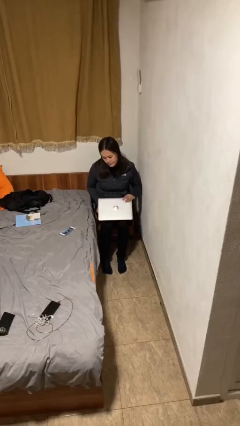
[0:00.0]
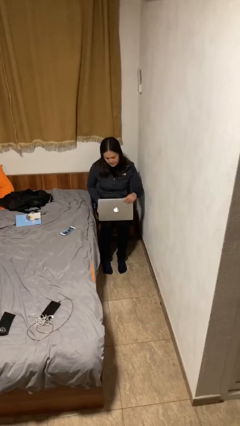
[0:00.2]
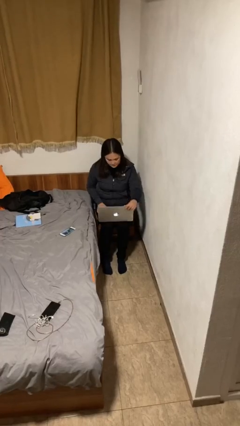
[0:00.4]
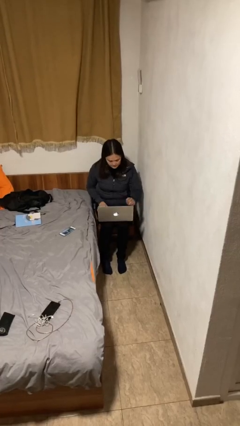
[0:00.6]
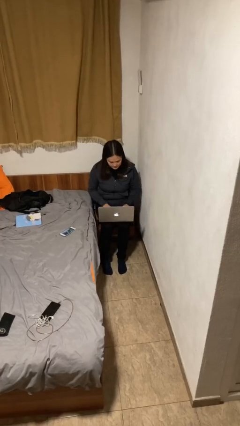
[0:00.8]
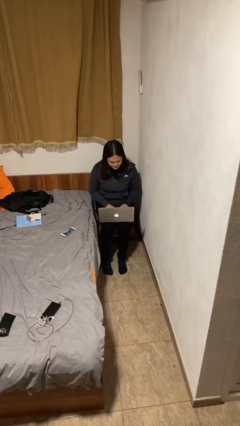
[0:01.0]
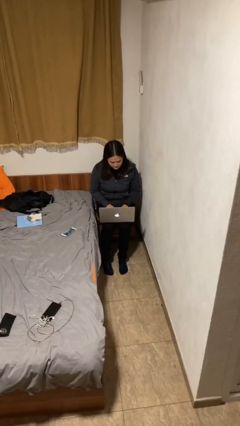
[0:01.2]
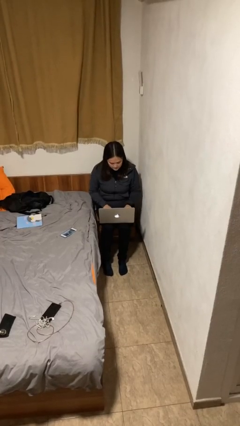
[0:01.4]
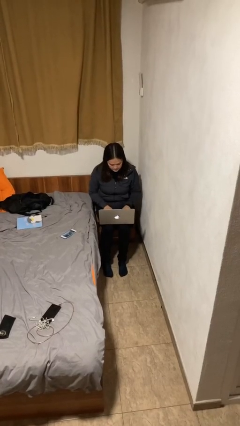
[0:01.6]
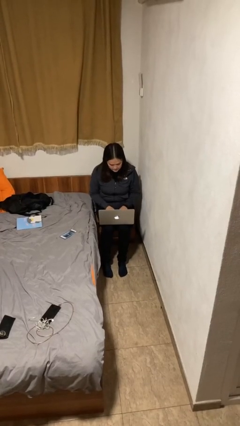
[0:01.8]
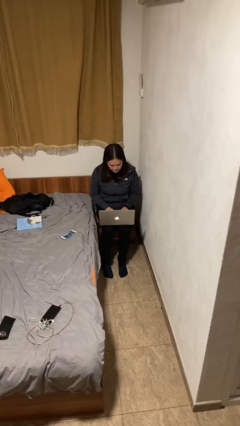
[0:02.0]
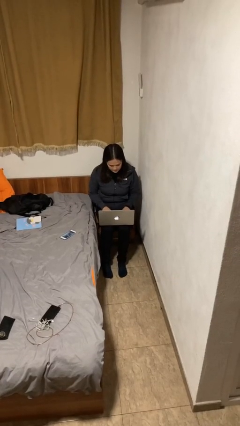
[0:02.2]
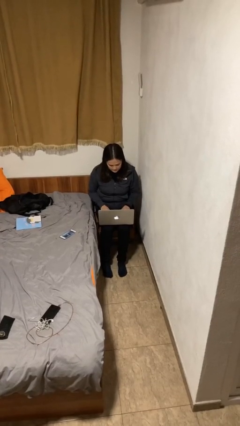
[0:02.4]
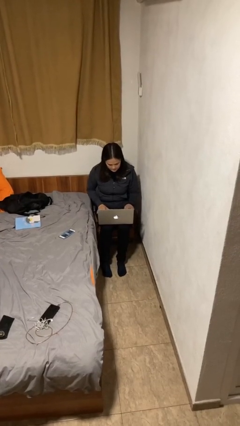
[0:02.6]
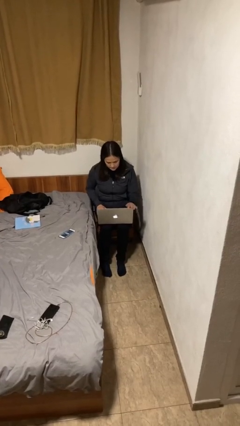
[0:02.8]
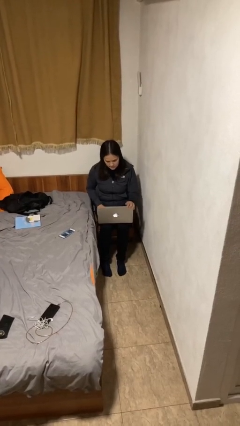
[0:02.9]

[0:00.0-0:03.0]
person interacts with laptop

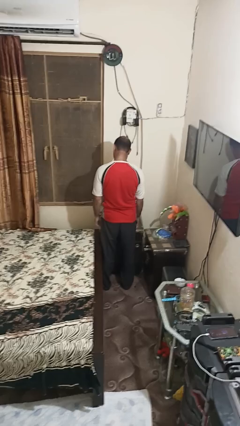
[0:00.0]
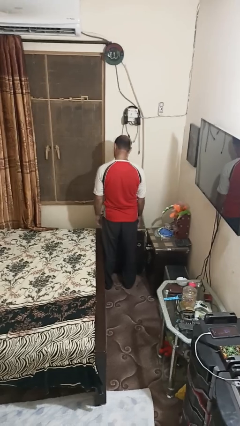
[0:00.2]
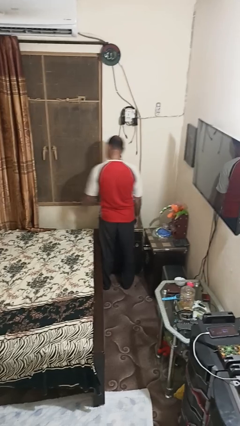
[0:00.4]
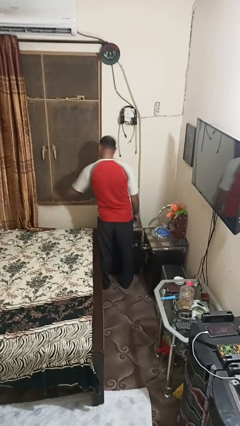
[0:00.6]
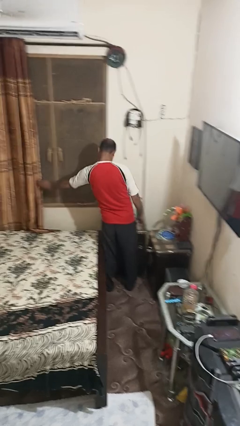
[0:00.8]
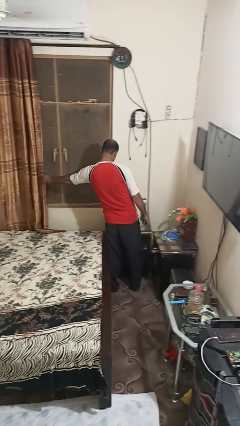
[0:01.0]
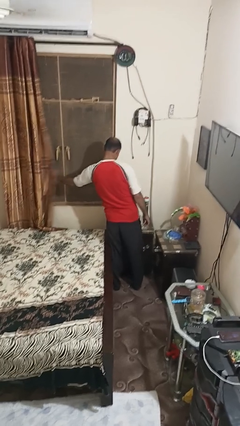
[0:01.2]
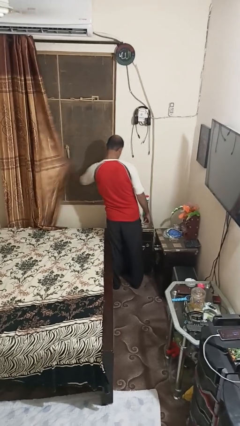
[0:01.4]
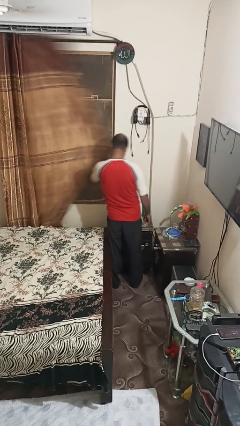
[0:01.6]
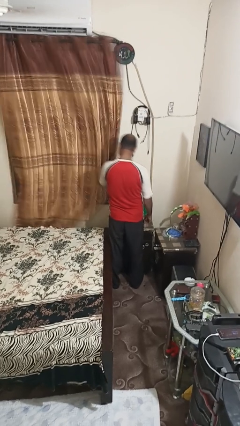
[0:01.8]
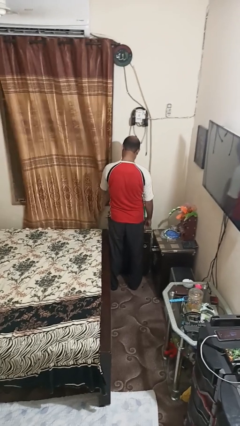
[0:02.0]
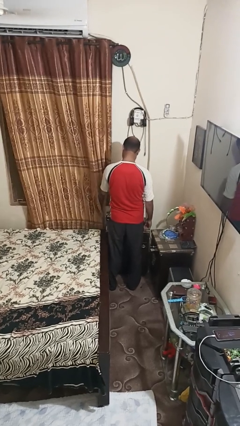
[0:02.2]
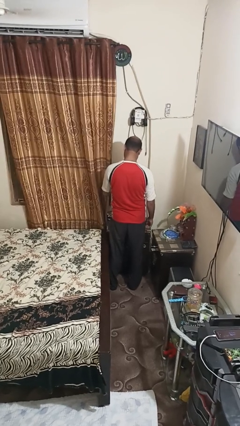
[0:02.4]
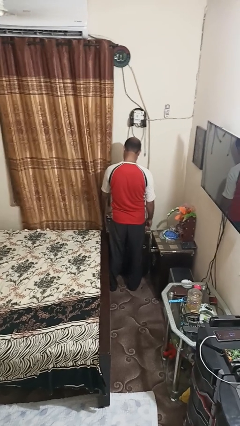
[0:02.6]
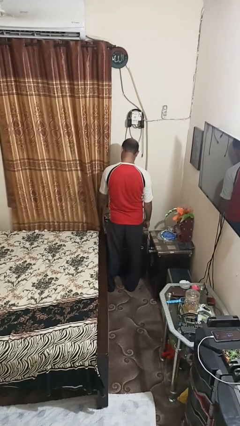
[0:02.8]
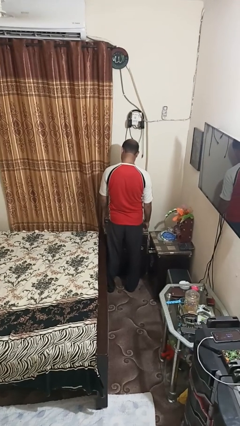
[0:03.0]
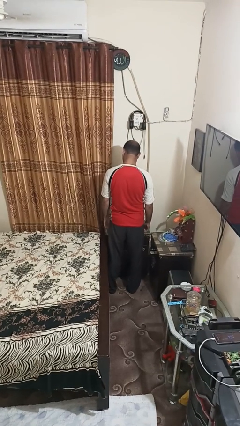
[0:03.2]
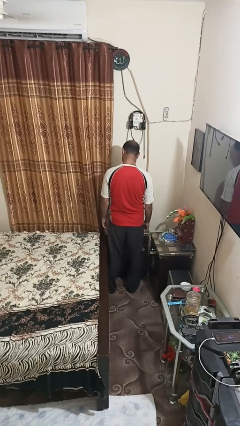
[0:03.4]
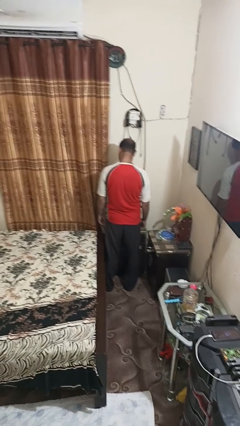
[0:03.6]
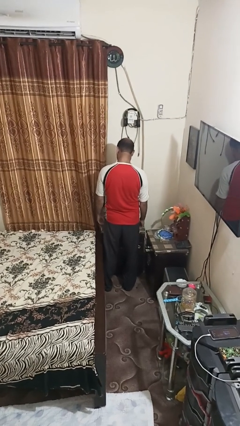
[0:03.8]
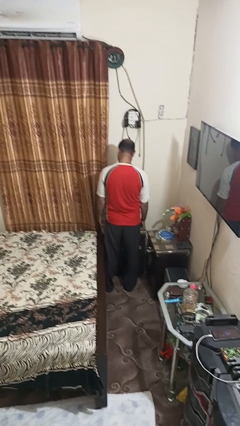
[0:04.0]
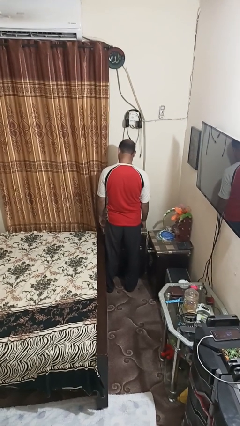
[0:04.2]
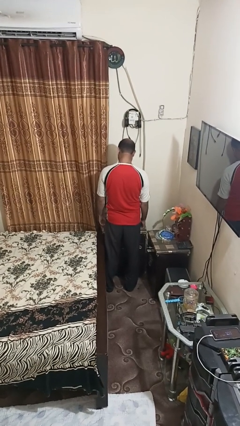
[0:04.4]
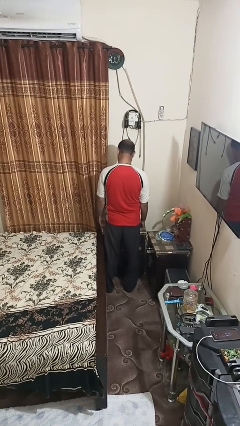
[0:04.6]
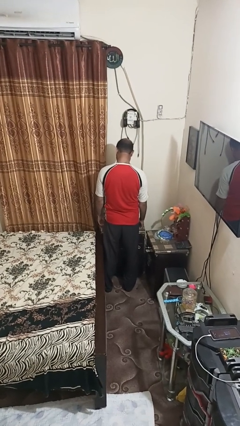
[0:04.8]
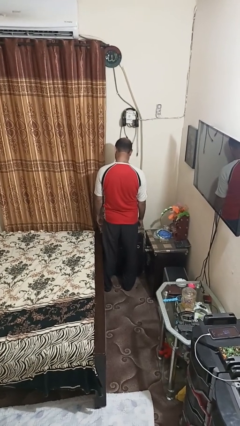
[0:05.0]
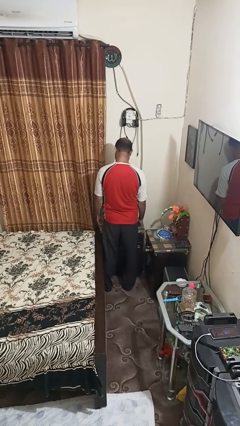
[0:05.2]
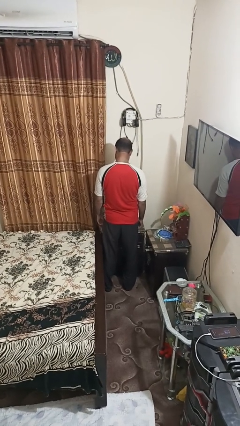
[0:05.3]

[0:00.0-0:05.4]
person closes curtains

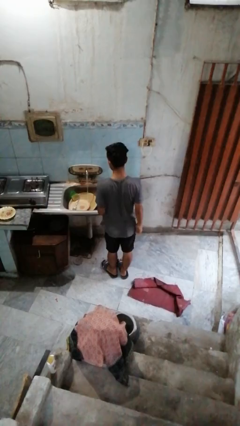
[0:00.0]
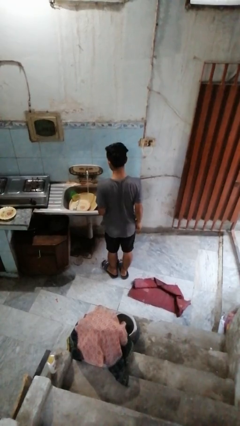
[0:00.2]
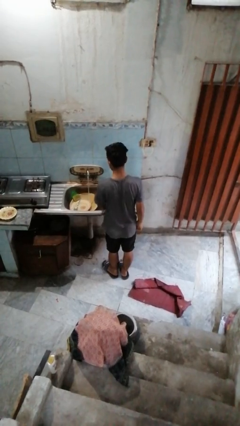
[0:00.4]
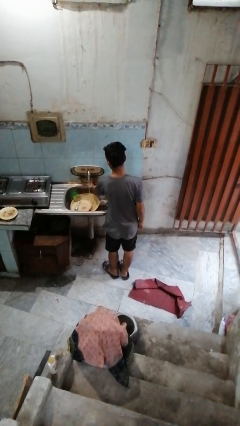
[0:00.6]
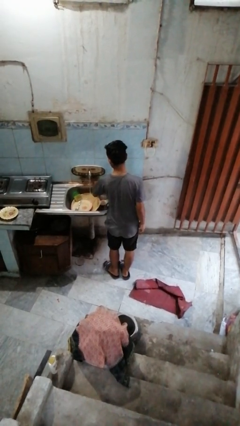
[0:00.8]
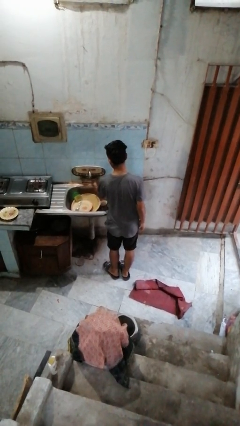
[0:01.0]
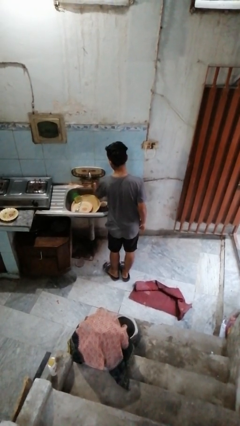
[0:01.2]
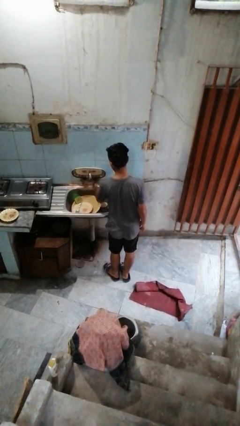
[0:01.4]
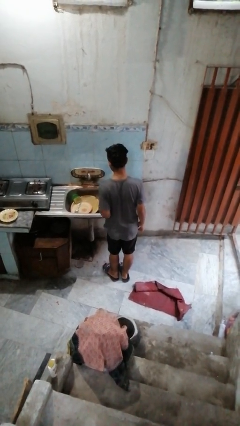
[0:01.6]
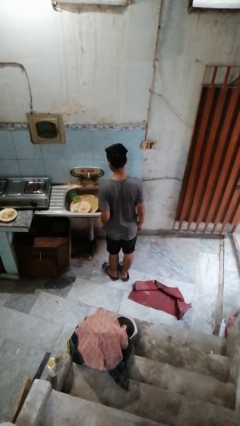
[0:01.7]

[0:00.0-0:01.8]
person turns off faucet

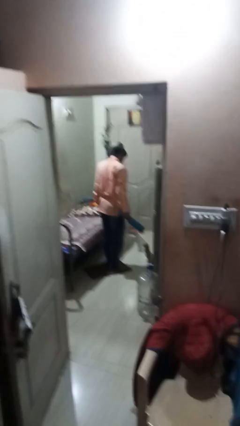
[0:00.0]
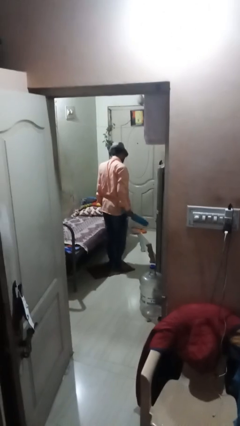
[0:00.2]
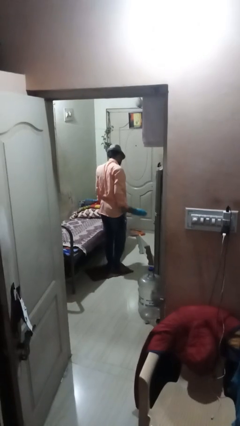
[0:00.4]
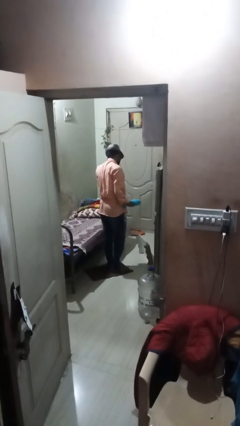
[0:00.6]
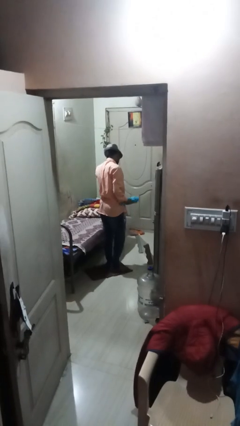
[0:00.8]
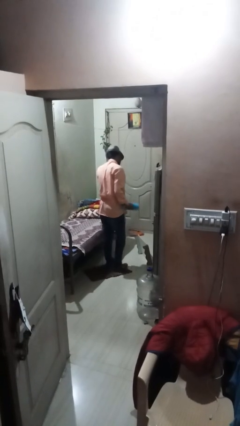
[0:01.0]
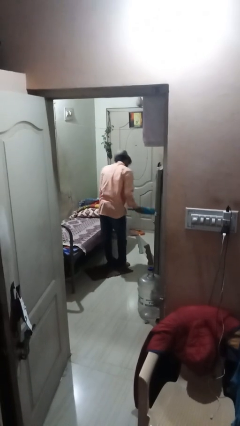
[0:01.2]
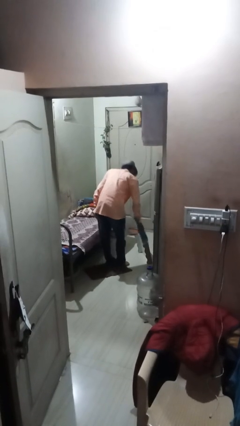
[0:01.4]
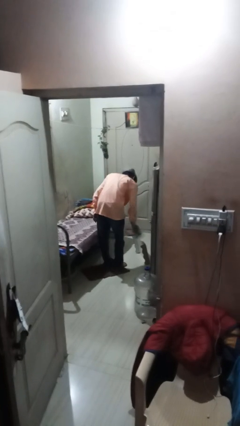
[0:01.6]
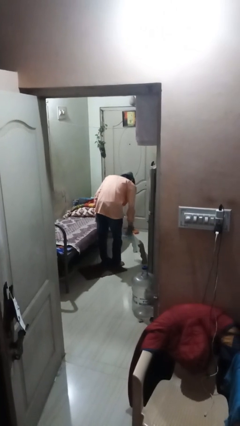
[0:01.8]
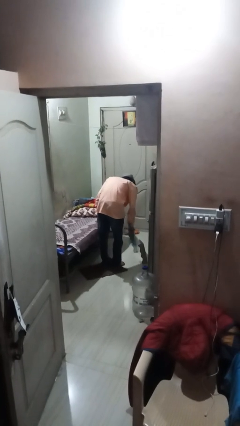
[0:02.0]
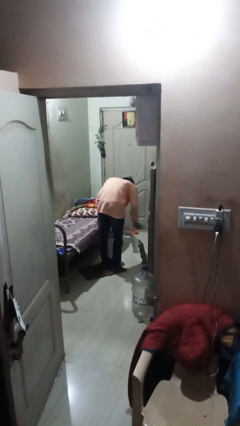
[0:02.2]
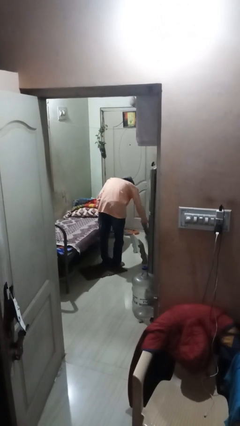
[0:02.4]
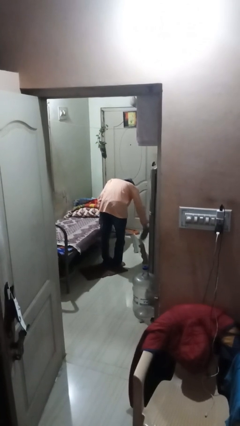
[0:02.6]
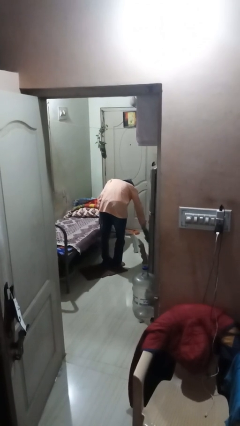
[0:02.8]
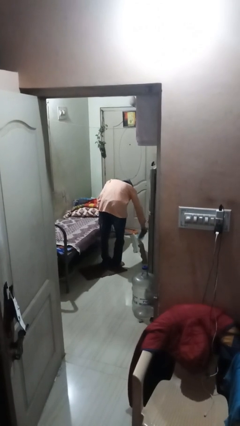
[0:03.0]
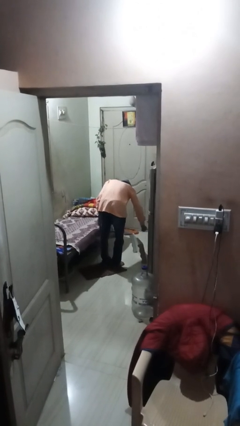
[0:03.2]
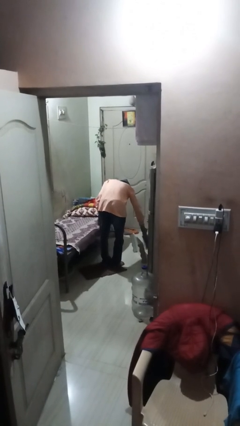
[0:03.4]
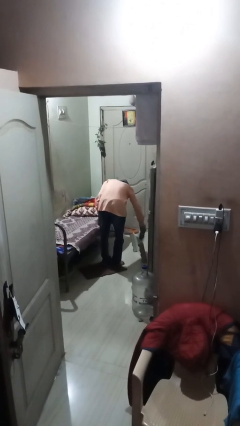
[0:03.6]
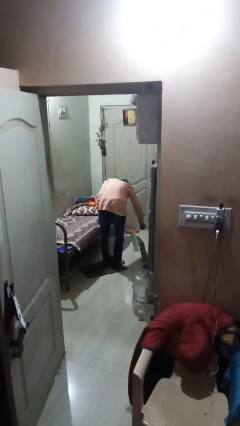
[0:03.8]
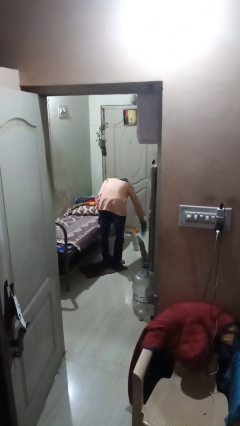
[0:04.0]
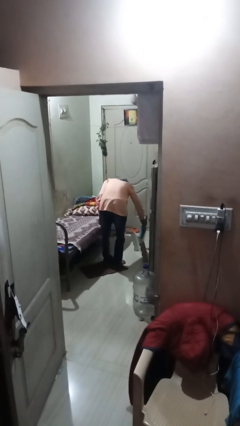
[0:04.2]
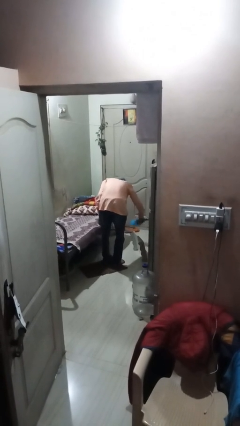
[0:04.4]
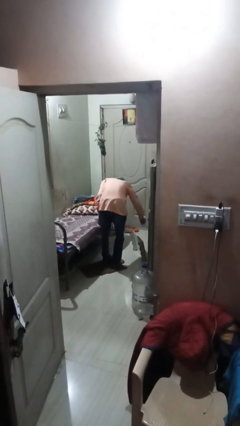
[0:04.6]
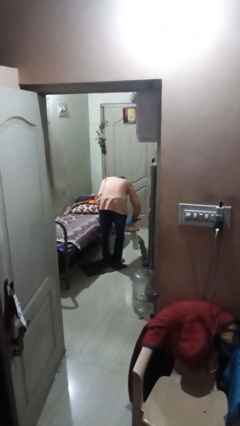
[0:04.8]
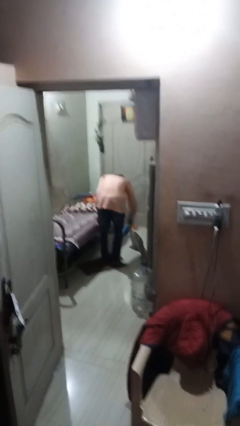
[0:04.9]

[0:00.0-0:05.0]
person dusts furniture

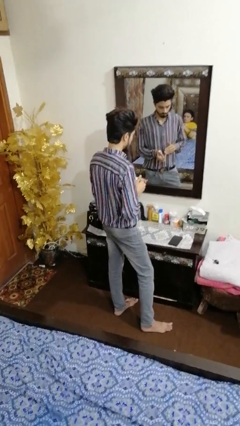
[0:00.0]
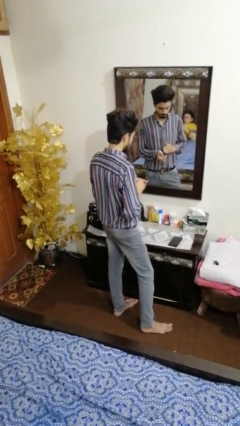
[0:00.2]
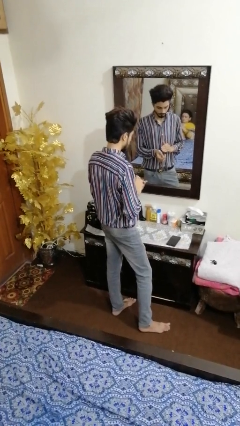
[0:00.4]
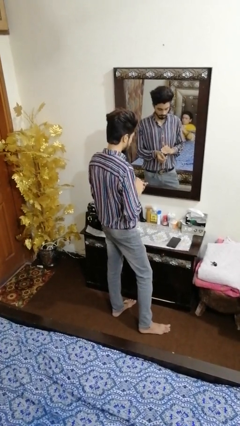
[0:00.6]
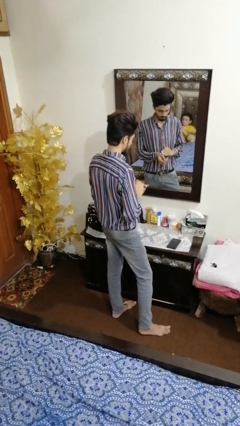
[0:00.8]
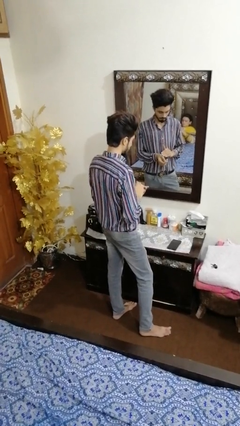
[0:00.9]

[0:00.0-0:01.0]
person applies foundation makeup

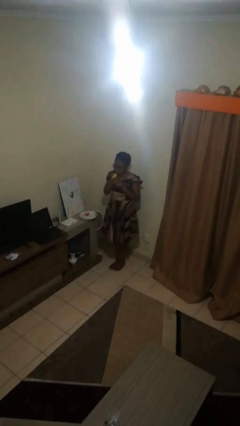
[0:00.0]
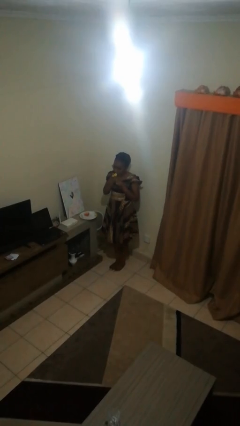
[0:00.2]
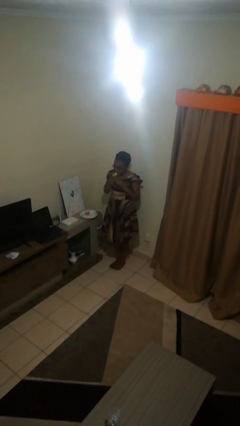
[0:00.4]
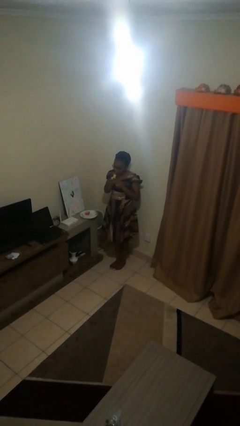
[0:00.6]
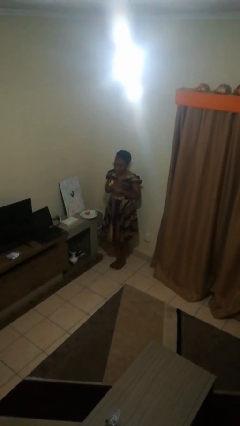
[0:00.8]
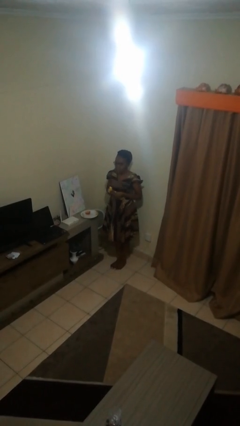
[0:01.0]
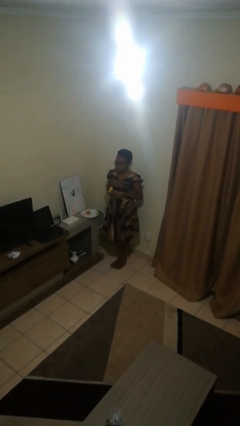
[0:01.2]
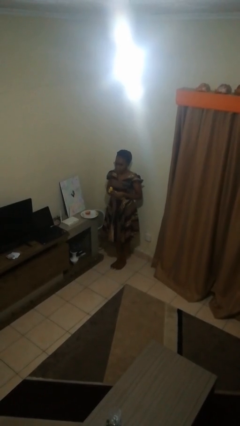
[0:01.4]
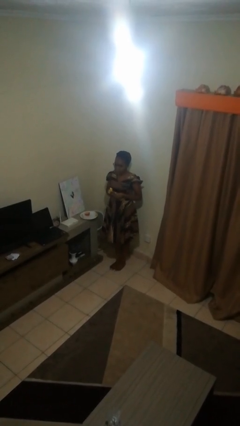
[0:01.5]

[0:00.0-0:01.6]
person eats banana
